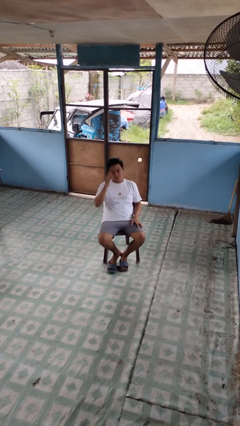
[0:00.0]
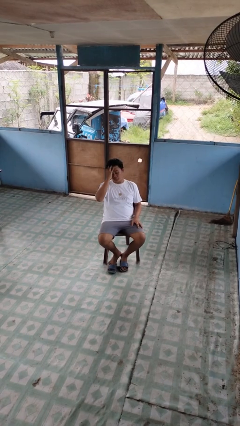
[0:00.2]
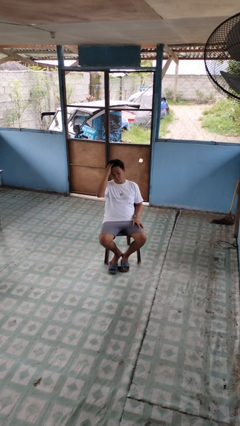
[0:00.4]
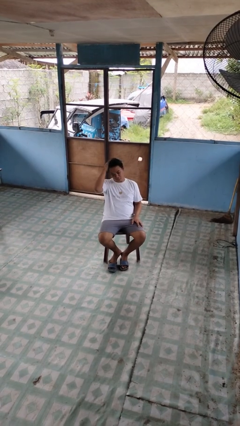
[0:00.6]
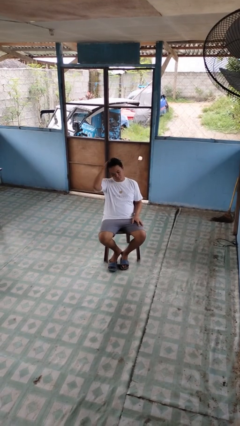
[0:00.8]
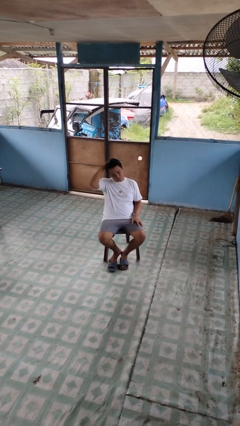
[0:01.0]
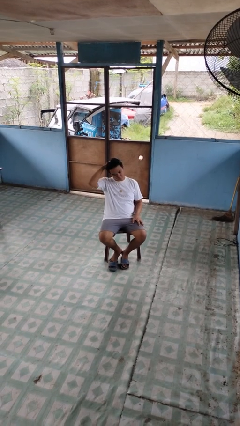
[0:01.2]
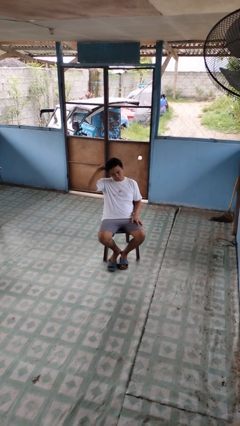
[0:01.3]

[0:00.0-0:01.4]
person strokes hair

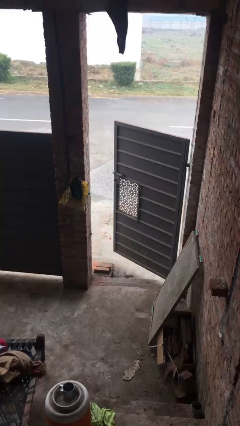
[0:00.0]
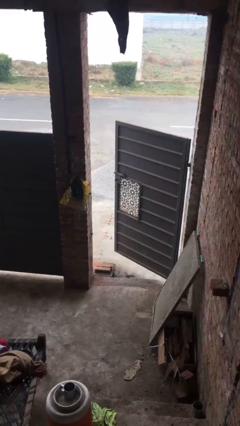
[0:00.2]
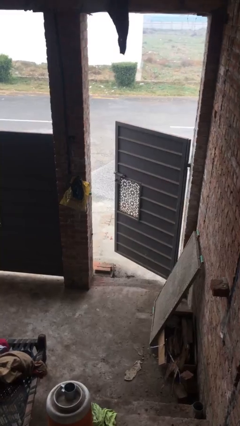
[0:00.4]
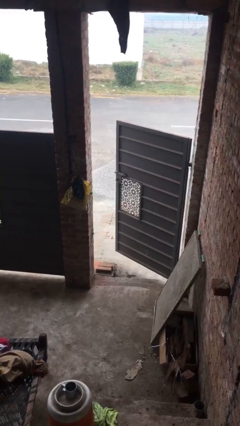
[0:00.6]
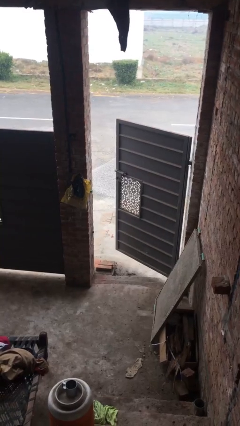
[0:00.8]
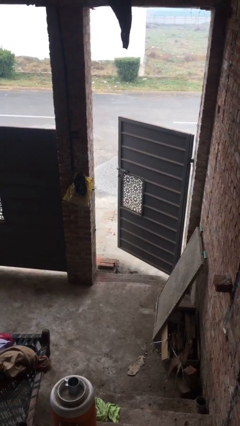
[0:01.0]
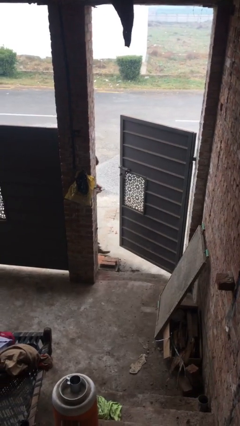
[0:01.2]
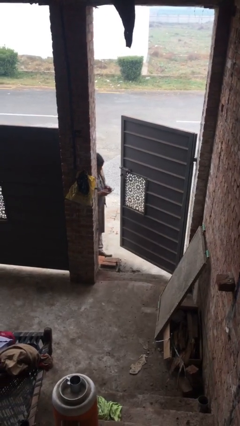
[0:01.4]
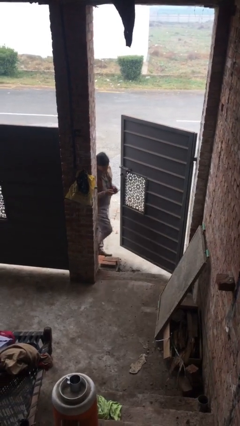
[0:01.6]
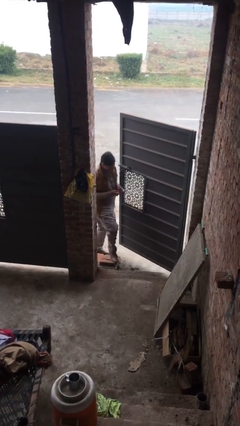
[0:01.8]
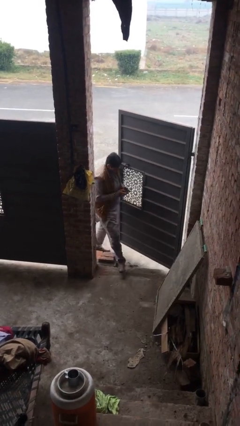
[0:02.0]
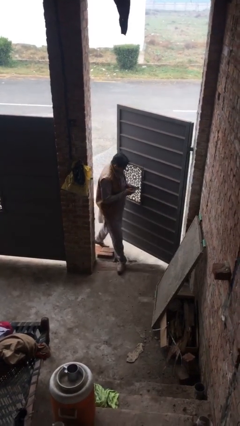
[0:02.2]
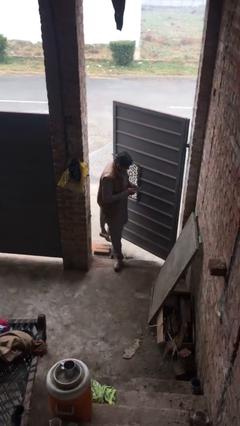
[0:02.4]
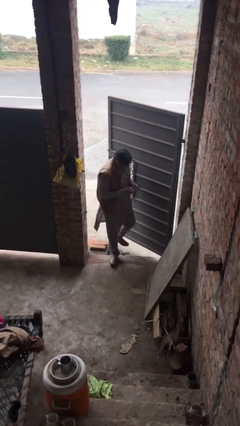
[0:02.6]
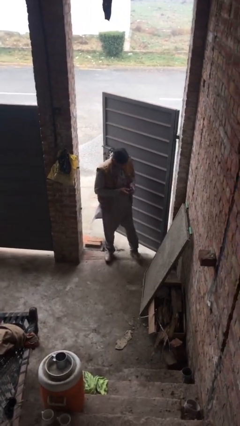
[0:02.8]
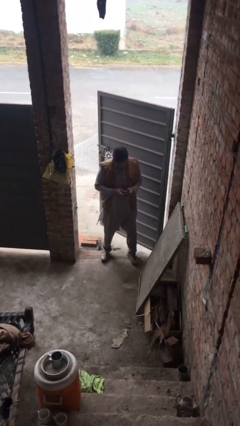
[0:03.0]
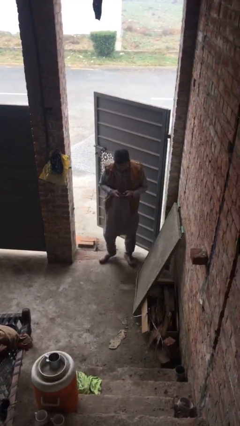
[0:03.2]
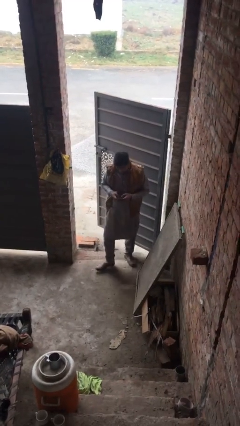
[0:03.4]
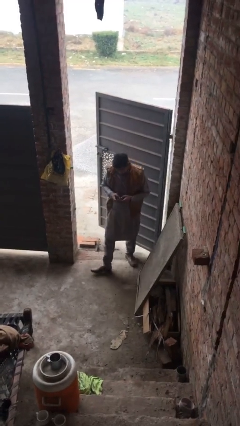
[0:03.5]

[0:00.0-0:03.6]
person enters scene through structure

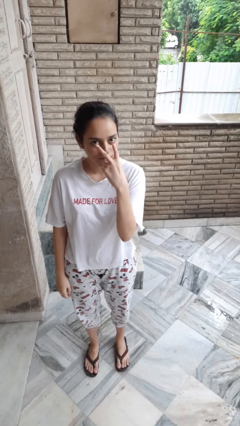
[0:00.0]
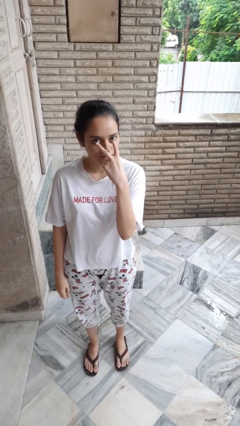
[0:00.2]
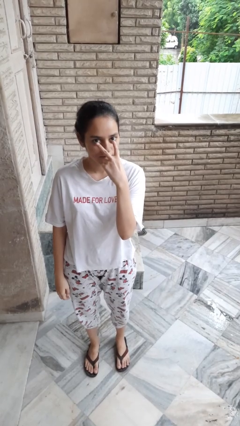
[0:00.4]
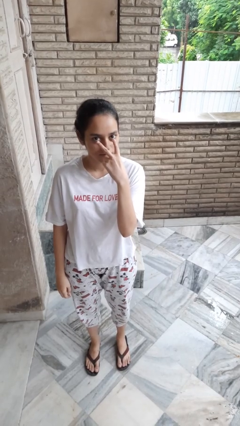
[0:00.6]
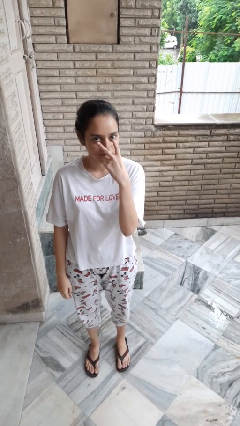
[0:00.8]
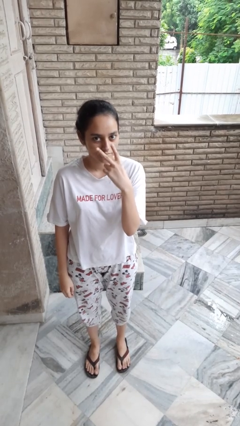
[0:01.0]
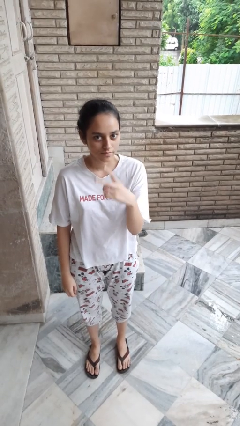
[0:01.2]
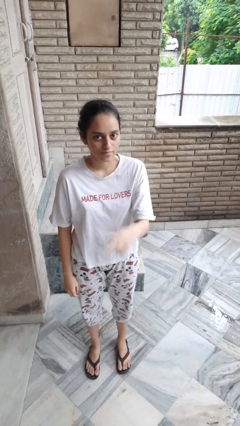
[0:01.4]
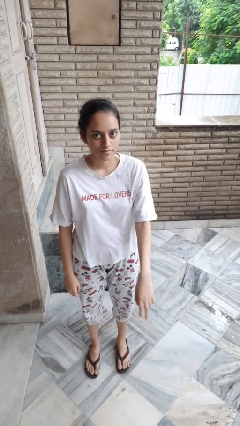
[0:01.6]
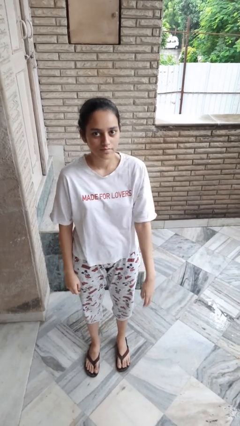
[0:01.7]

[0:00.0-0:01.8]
person gestures watch closely

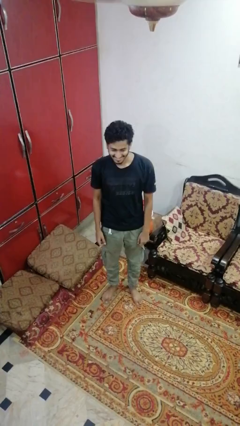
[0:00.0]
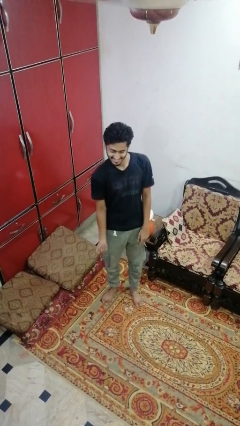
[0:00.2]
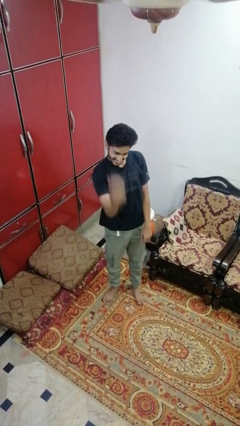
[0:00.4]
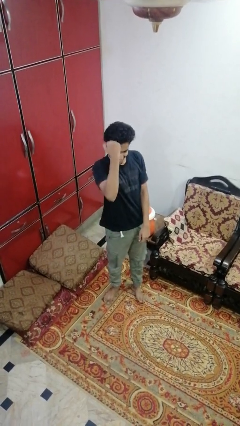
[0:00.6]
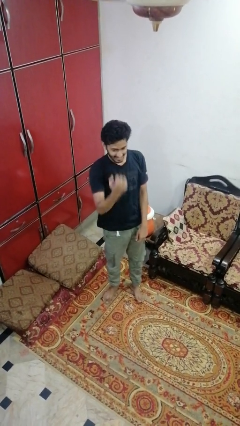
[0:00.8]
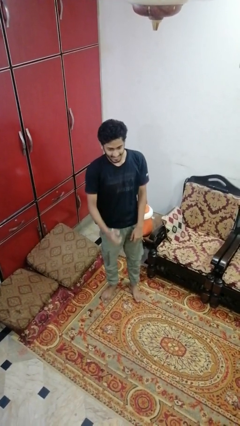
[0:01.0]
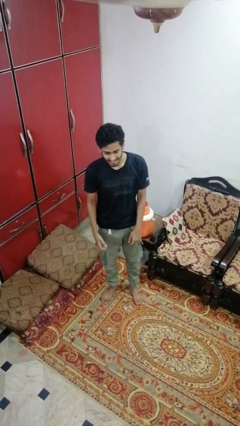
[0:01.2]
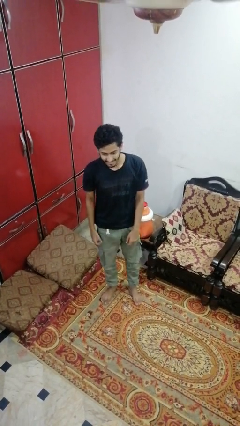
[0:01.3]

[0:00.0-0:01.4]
person punches

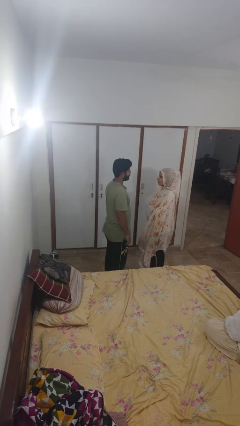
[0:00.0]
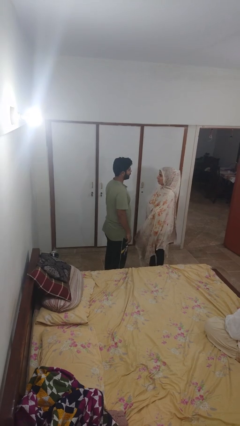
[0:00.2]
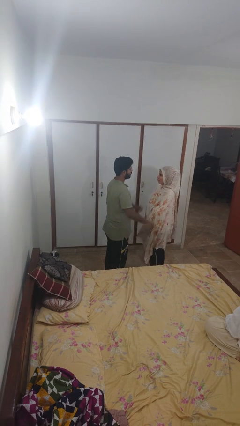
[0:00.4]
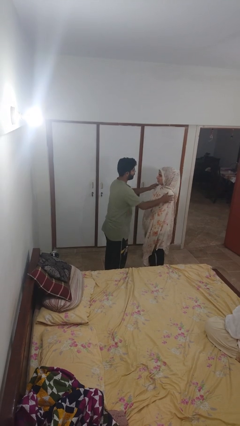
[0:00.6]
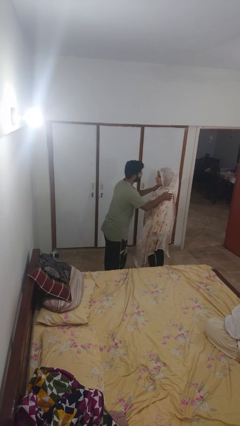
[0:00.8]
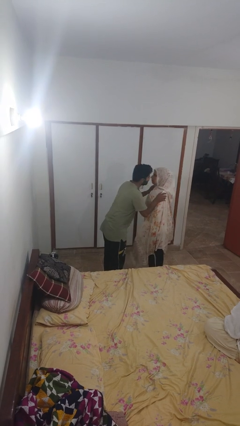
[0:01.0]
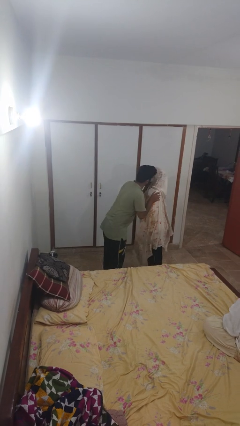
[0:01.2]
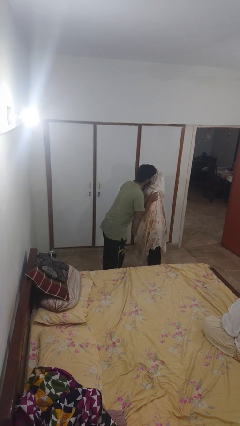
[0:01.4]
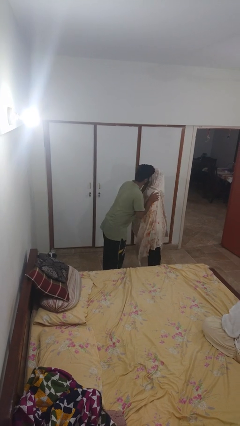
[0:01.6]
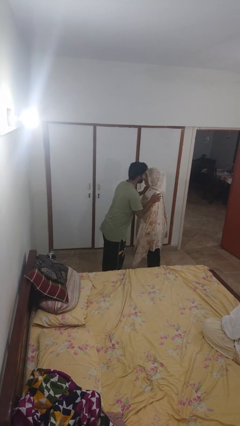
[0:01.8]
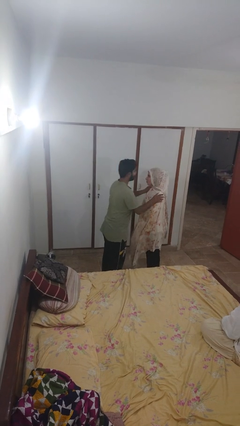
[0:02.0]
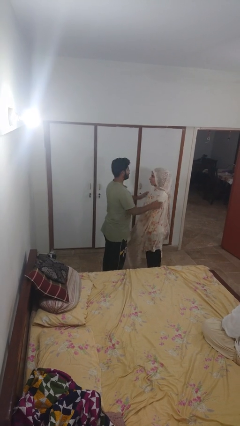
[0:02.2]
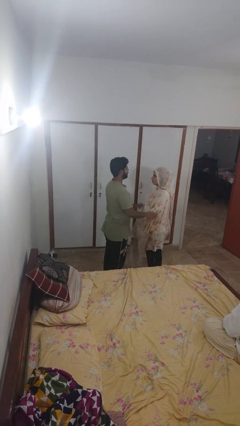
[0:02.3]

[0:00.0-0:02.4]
person kisses cheek of person

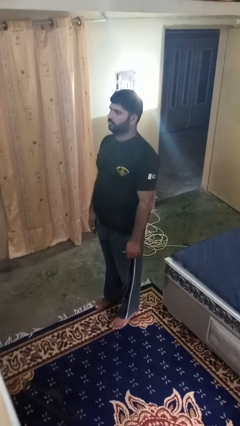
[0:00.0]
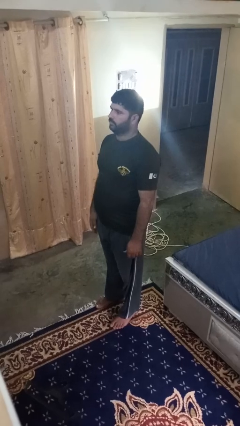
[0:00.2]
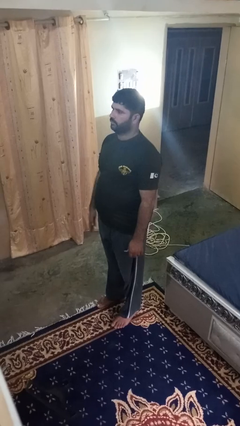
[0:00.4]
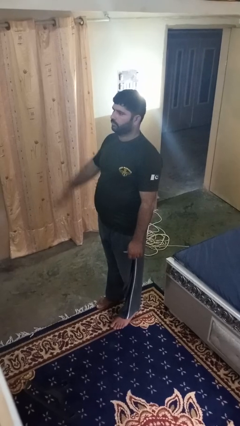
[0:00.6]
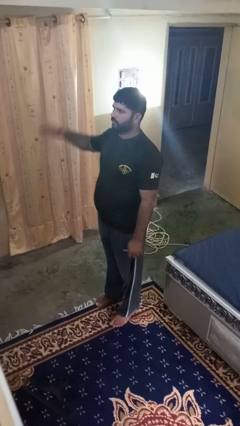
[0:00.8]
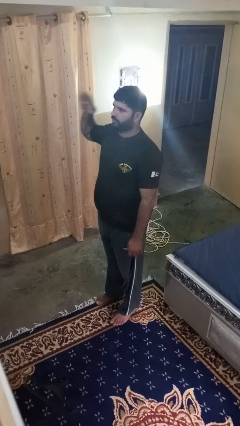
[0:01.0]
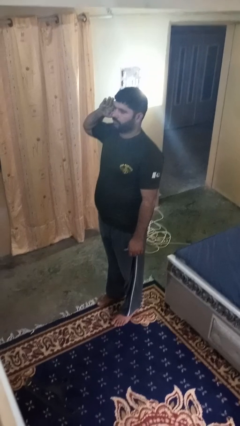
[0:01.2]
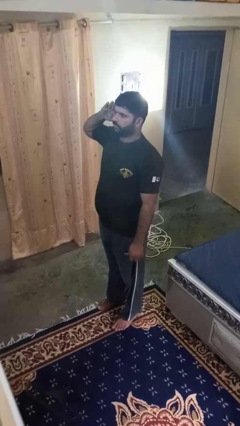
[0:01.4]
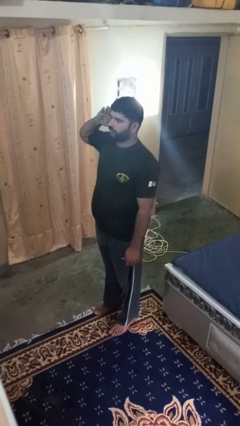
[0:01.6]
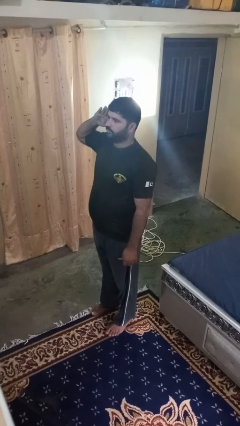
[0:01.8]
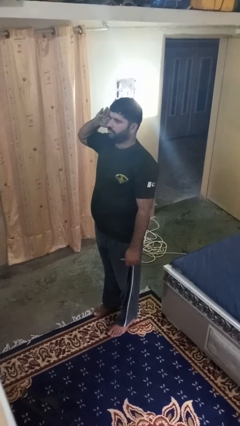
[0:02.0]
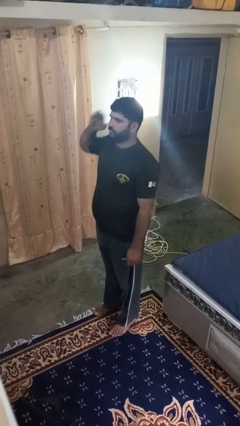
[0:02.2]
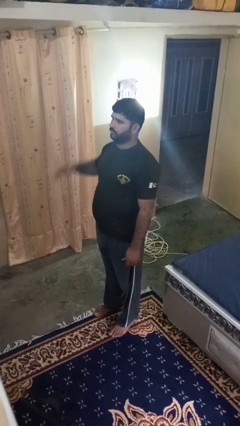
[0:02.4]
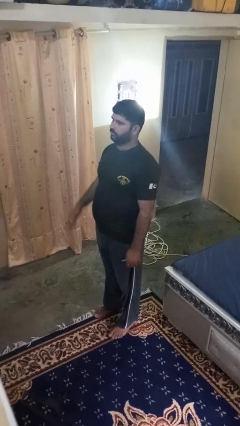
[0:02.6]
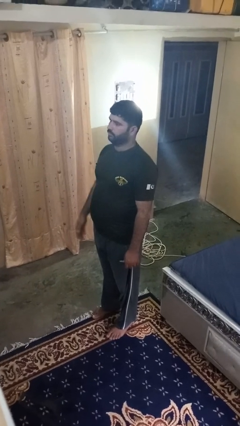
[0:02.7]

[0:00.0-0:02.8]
person salutes

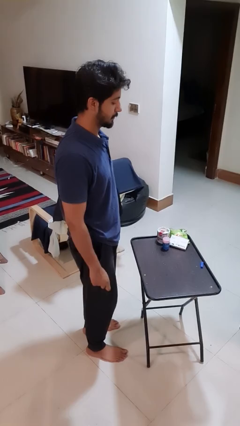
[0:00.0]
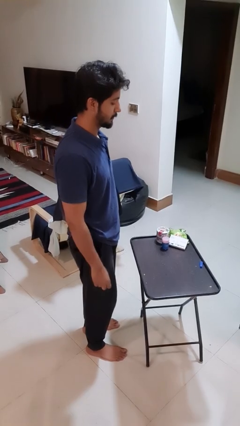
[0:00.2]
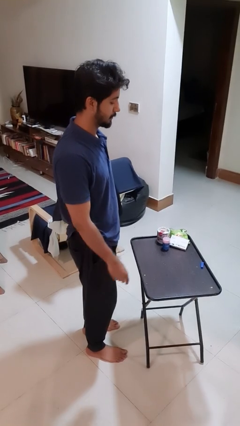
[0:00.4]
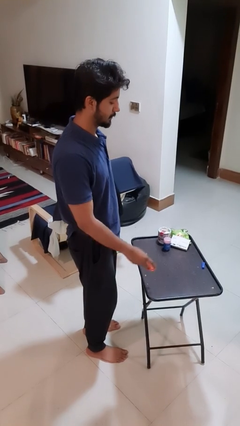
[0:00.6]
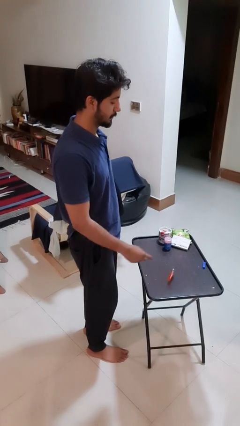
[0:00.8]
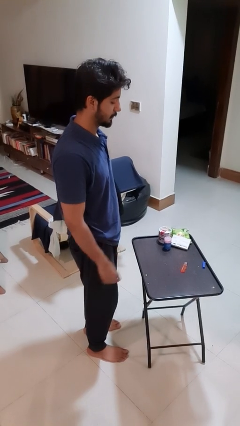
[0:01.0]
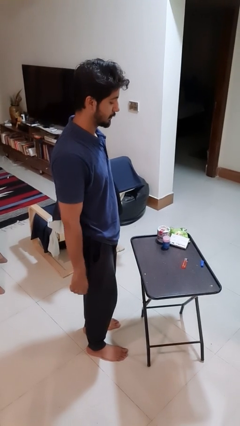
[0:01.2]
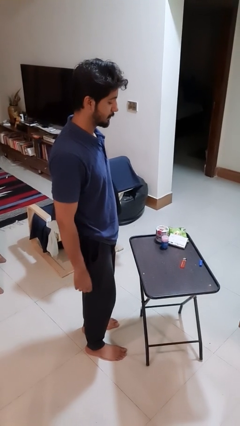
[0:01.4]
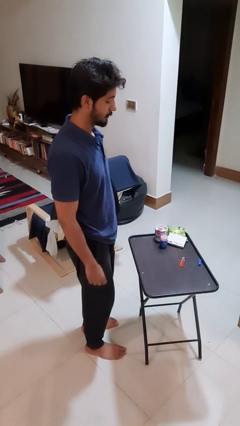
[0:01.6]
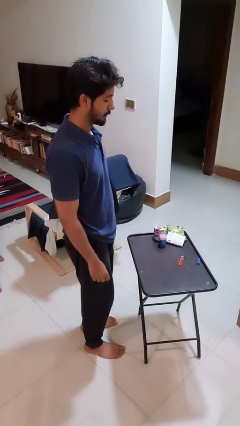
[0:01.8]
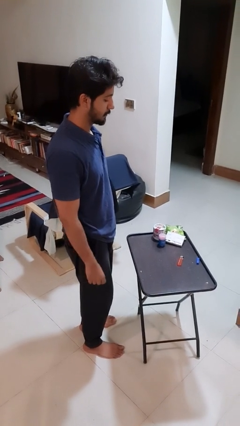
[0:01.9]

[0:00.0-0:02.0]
person throws object on table

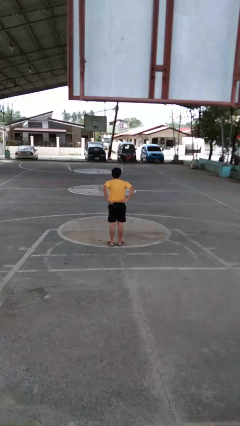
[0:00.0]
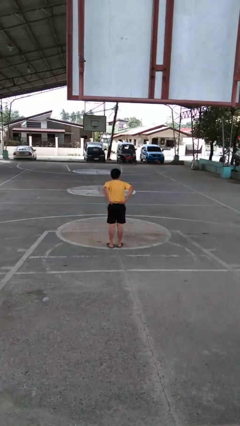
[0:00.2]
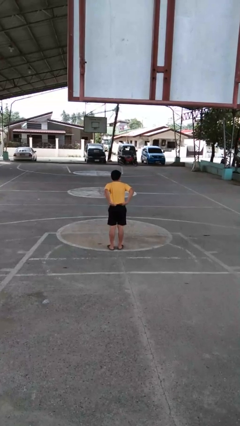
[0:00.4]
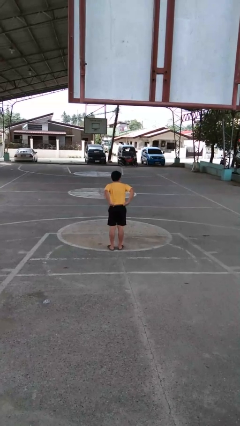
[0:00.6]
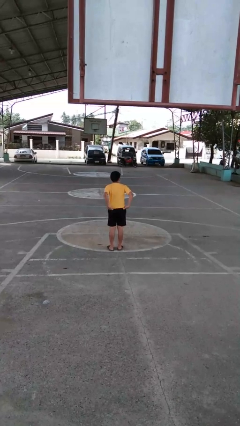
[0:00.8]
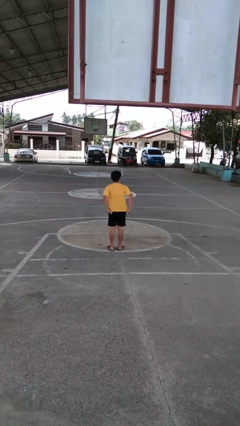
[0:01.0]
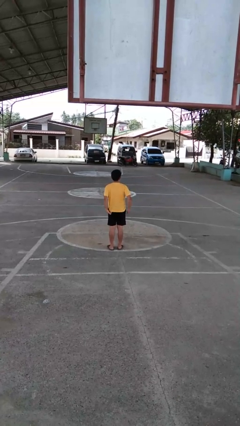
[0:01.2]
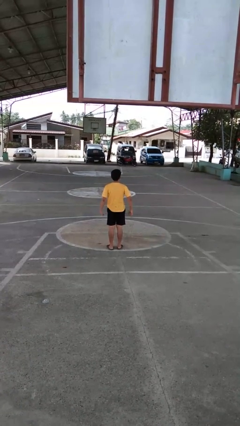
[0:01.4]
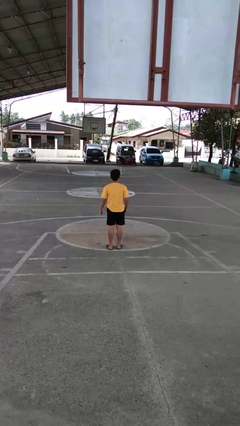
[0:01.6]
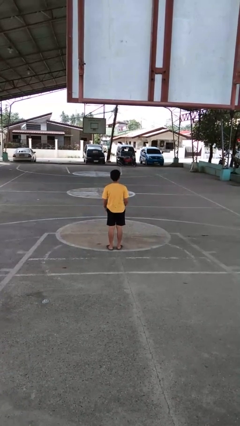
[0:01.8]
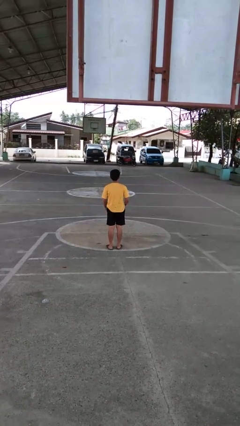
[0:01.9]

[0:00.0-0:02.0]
person untucks shirt
